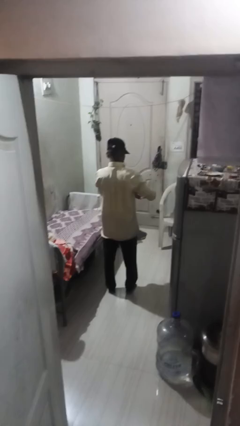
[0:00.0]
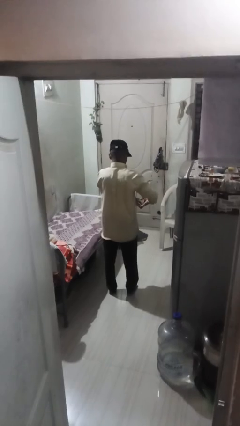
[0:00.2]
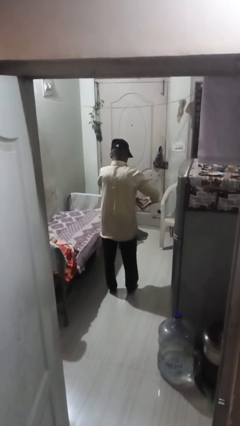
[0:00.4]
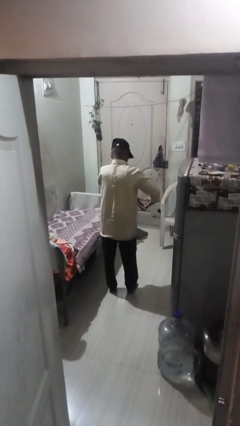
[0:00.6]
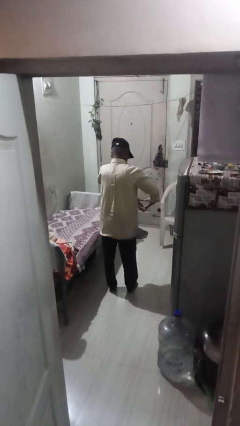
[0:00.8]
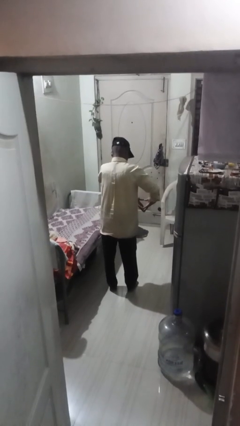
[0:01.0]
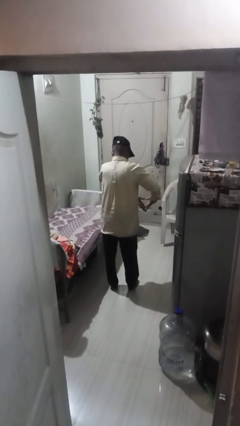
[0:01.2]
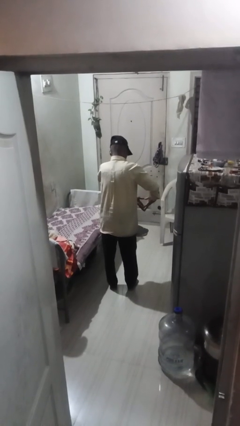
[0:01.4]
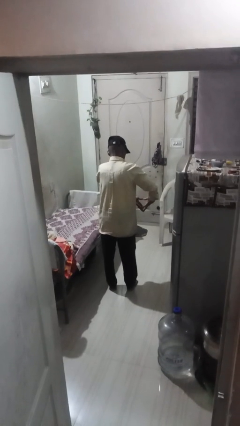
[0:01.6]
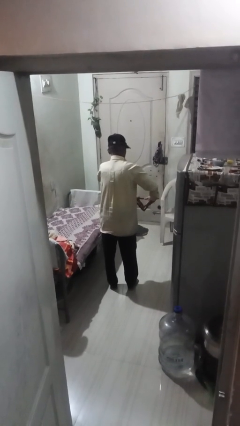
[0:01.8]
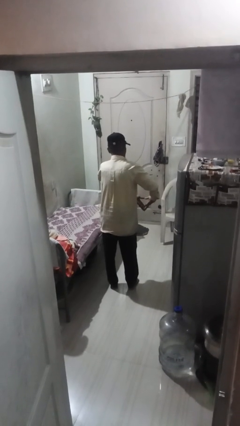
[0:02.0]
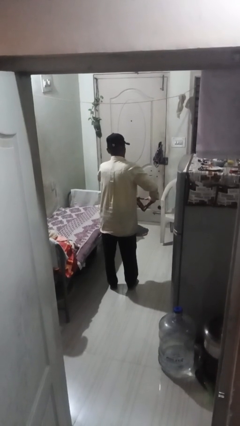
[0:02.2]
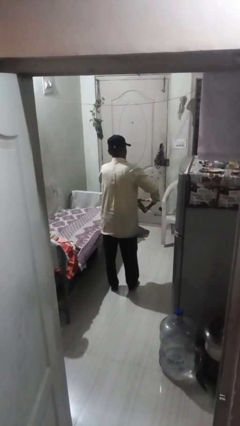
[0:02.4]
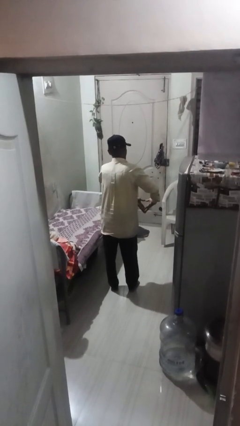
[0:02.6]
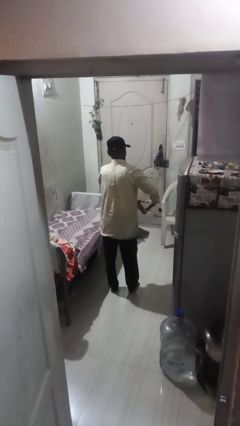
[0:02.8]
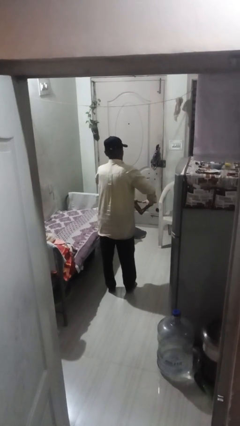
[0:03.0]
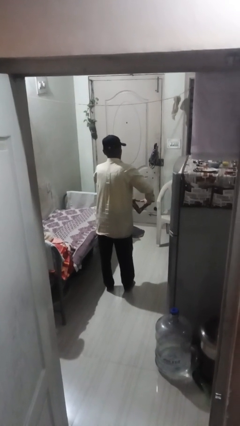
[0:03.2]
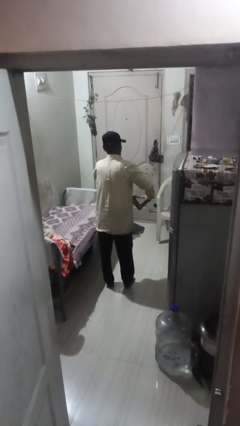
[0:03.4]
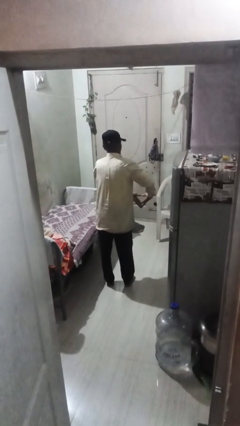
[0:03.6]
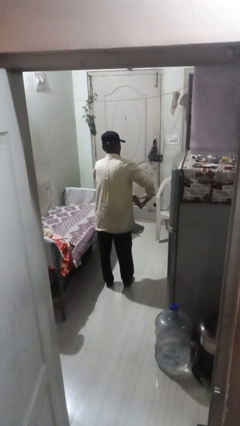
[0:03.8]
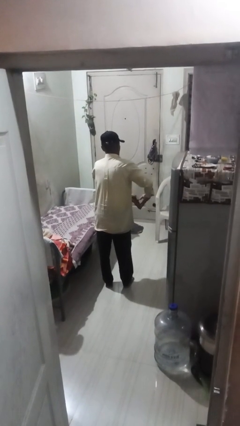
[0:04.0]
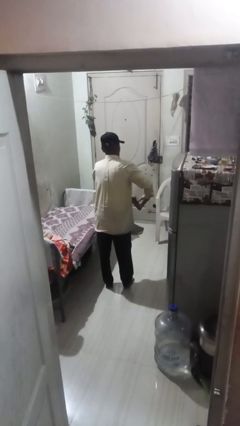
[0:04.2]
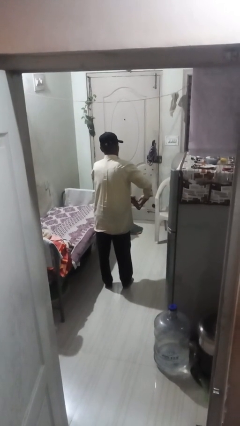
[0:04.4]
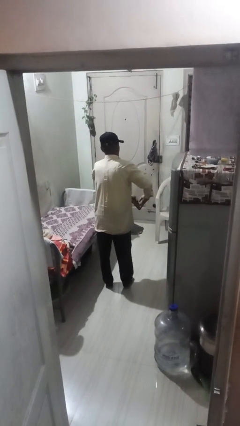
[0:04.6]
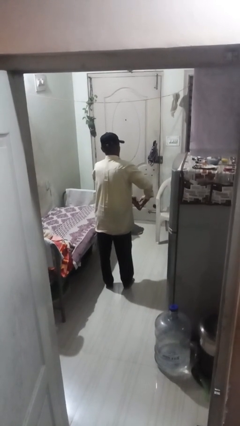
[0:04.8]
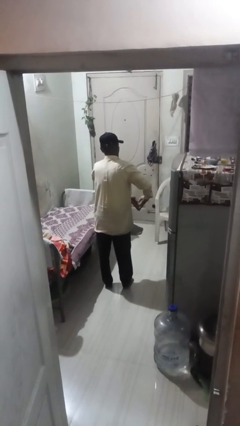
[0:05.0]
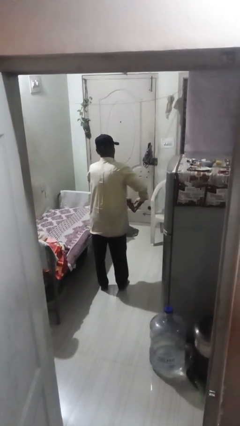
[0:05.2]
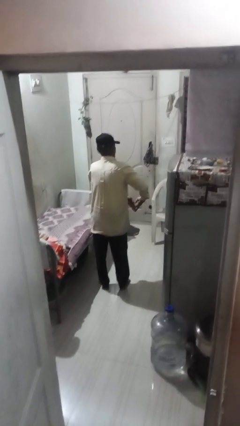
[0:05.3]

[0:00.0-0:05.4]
person gestures heart

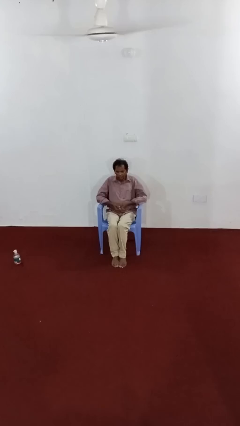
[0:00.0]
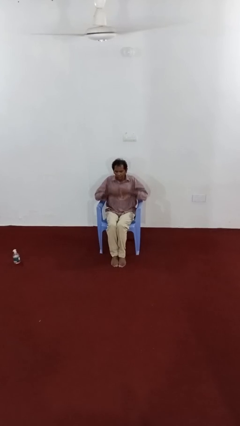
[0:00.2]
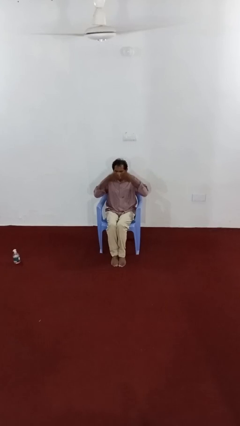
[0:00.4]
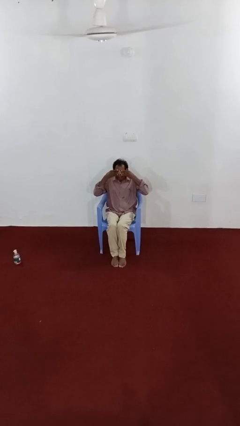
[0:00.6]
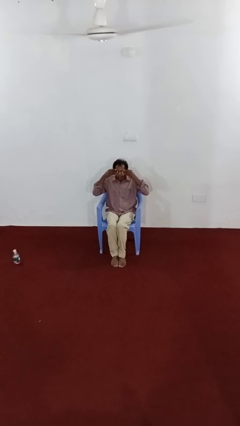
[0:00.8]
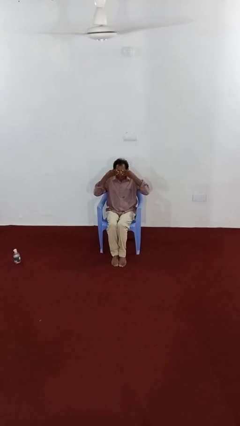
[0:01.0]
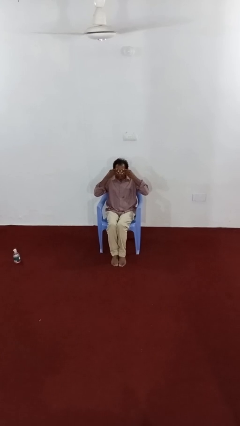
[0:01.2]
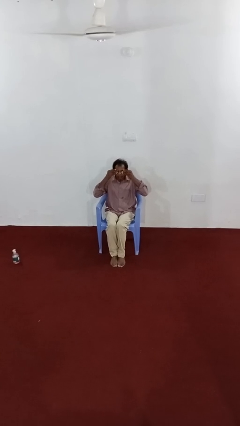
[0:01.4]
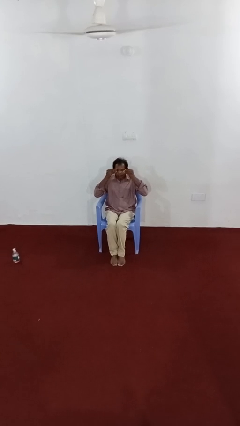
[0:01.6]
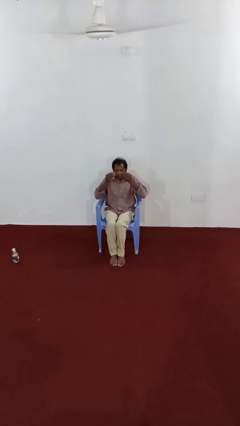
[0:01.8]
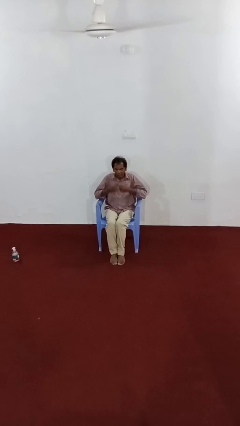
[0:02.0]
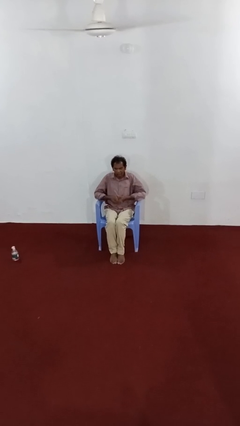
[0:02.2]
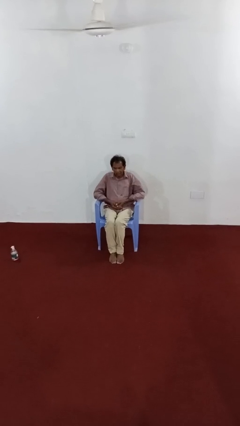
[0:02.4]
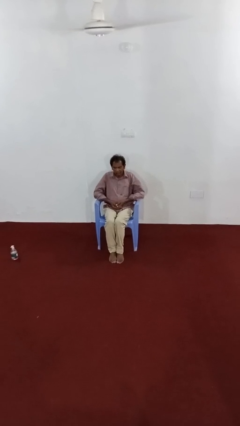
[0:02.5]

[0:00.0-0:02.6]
person rubs eyes

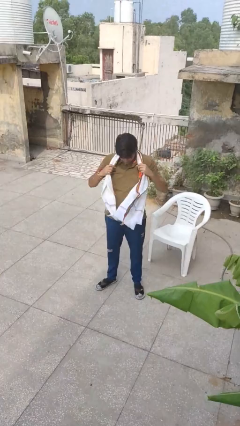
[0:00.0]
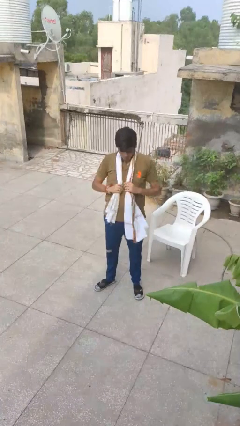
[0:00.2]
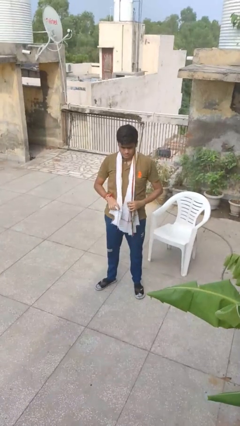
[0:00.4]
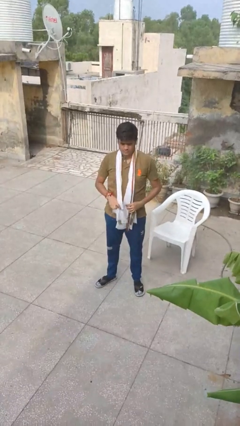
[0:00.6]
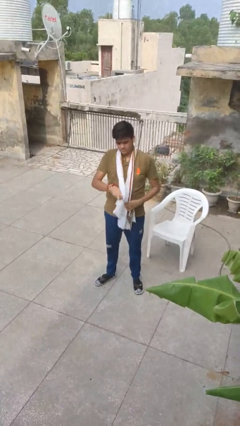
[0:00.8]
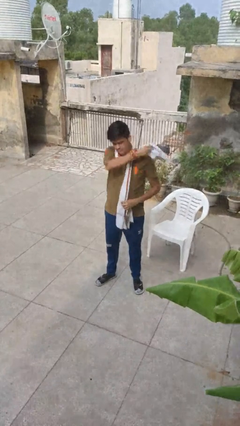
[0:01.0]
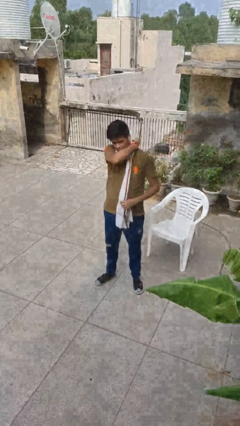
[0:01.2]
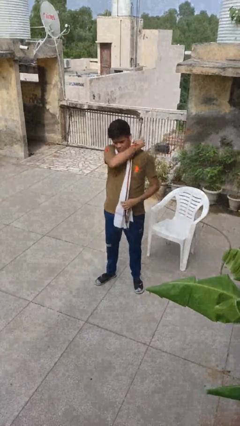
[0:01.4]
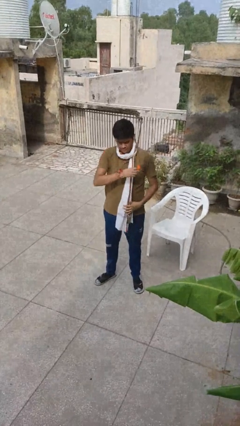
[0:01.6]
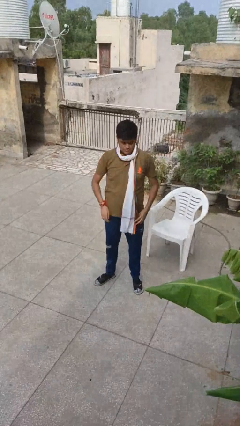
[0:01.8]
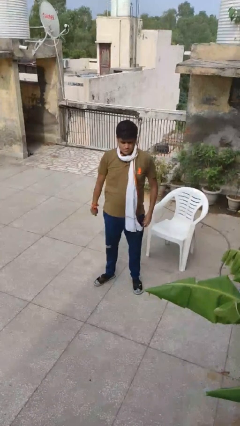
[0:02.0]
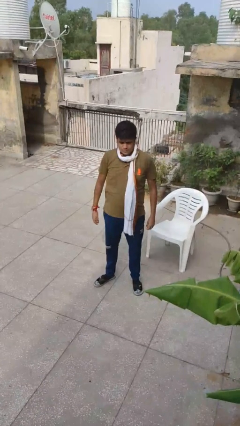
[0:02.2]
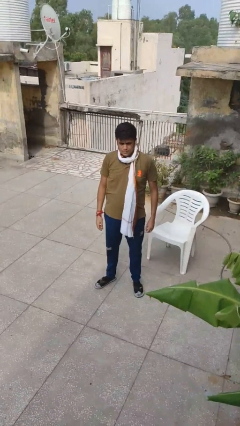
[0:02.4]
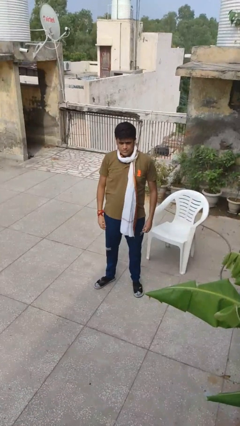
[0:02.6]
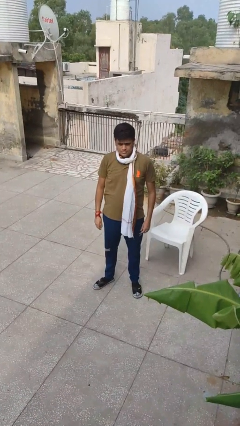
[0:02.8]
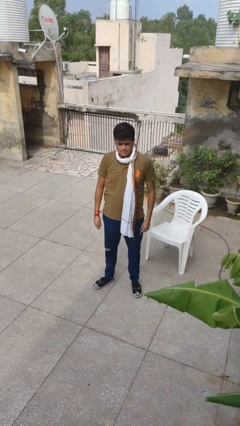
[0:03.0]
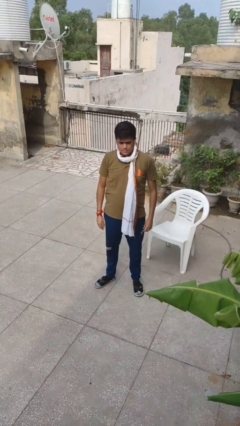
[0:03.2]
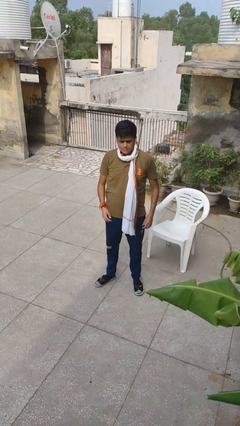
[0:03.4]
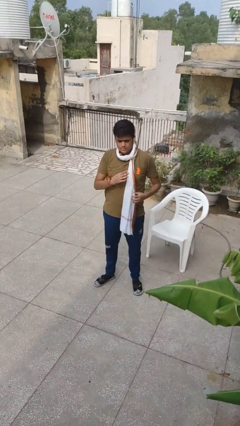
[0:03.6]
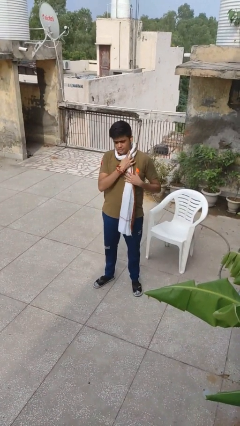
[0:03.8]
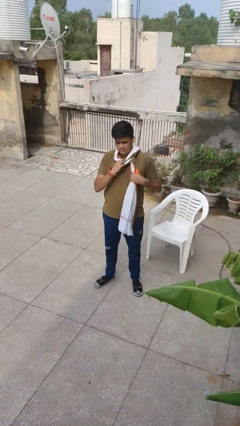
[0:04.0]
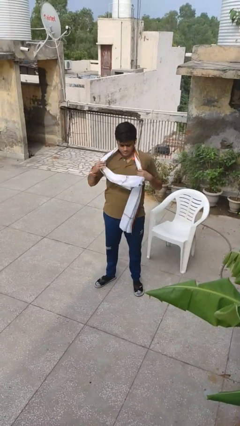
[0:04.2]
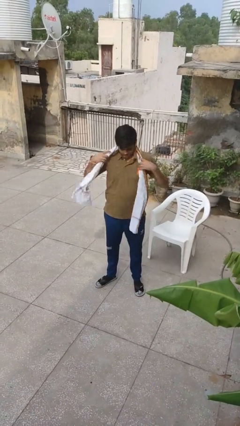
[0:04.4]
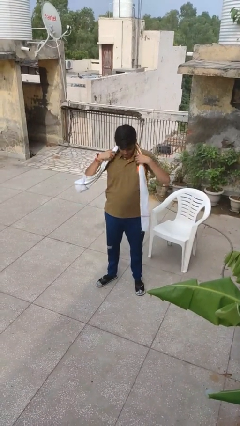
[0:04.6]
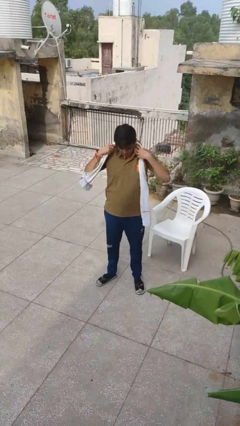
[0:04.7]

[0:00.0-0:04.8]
person puts on scarf

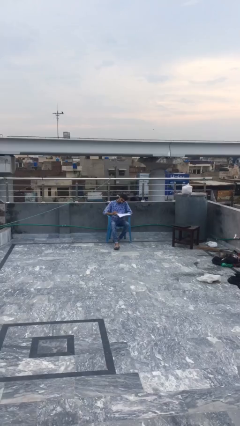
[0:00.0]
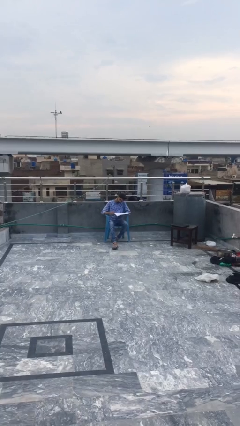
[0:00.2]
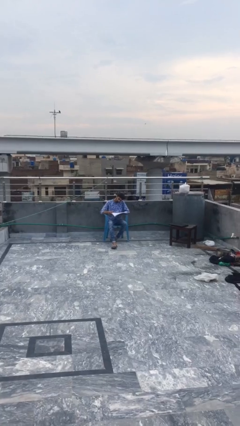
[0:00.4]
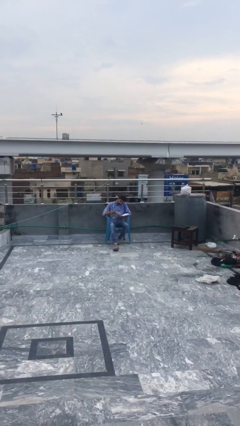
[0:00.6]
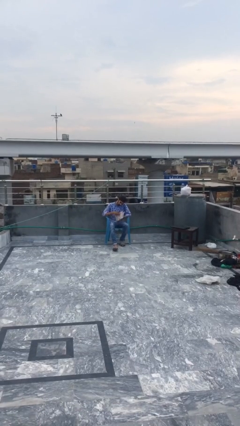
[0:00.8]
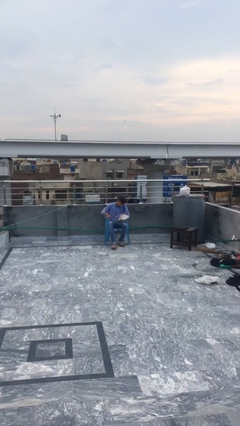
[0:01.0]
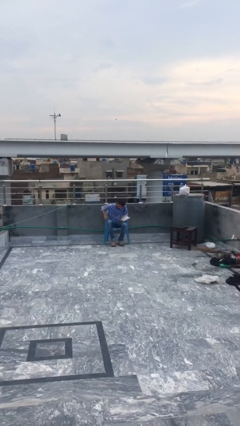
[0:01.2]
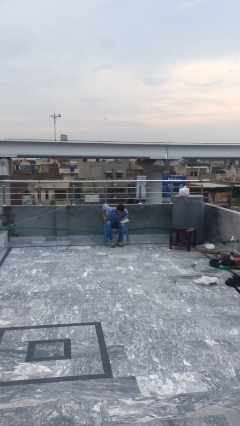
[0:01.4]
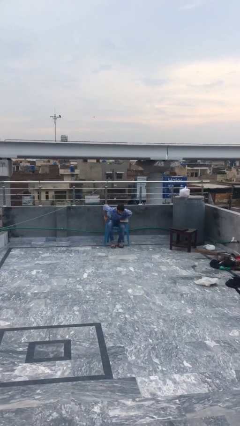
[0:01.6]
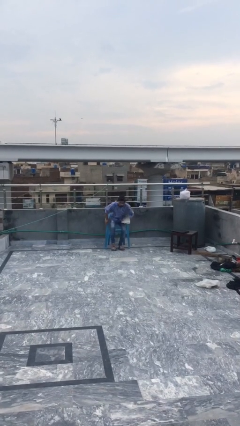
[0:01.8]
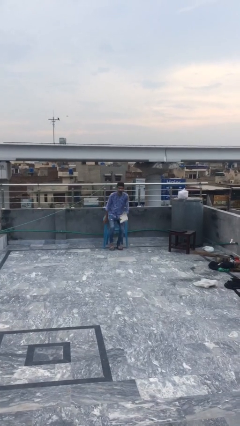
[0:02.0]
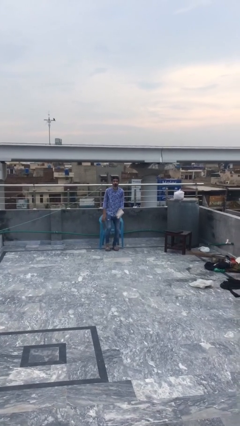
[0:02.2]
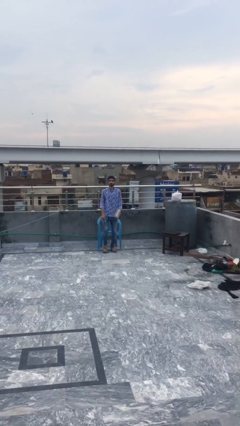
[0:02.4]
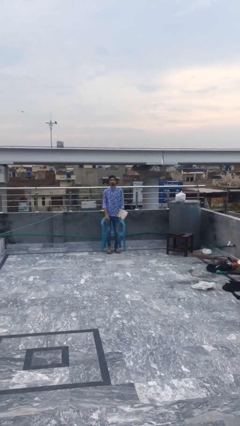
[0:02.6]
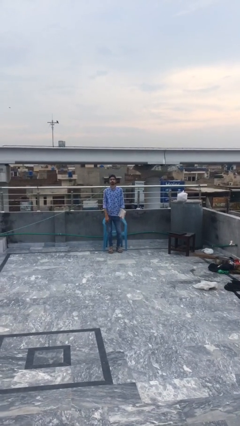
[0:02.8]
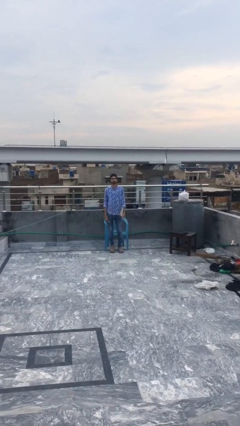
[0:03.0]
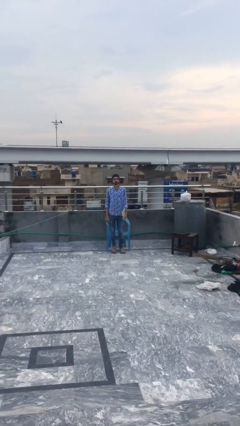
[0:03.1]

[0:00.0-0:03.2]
person stands up

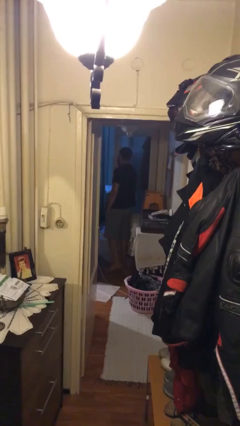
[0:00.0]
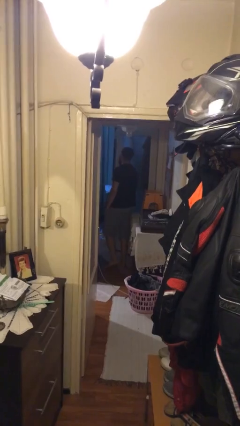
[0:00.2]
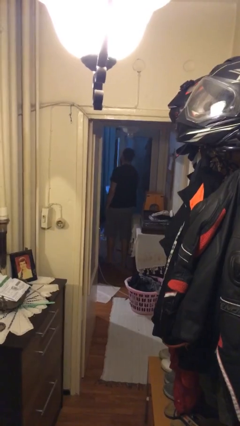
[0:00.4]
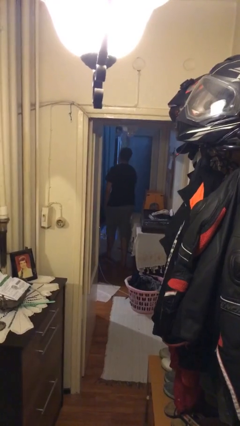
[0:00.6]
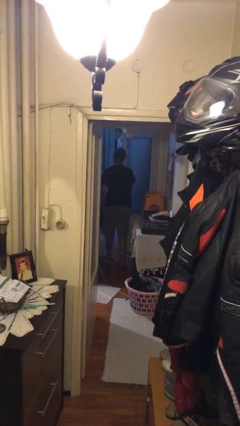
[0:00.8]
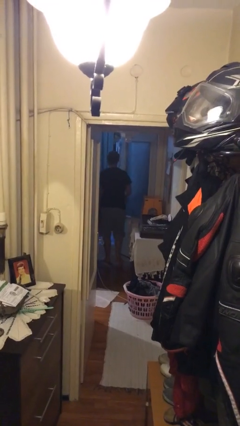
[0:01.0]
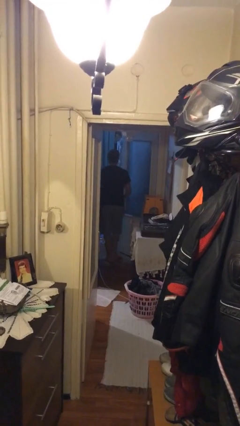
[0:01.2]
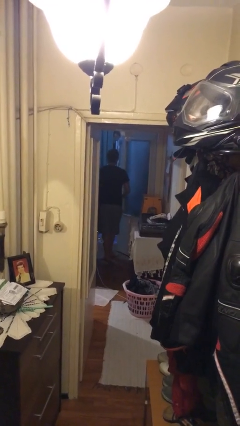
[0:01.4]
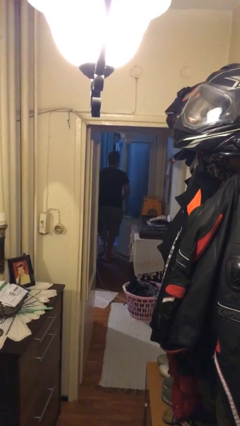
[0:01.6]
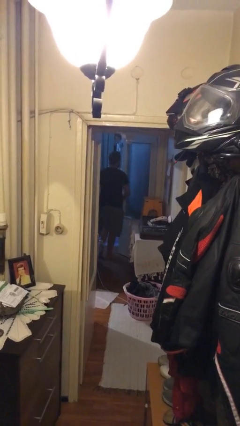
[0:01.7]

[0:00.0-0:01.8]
person exits scene through structure
